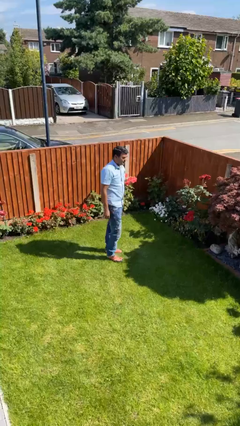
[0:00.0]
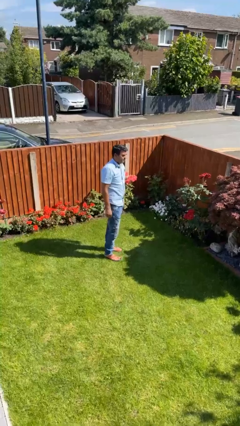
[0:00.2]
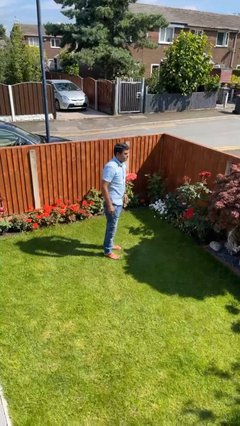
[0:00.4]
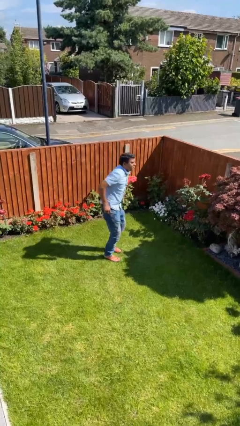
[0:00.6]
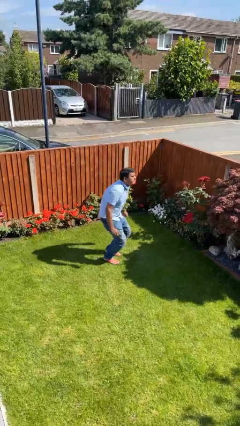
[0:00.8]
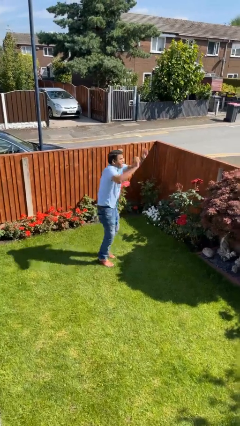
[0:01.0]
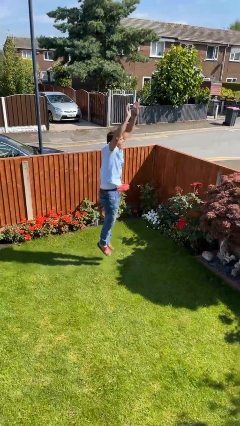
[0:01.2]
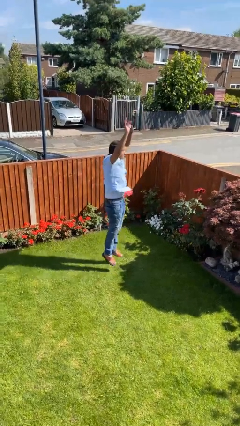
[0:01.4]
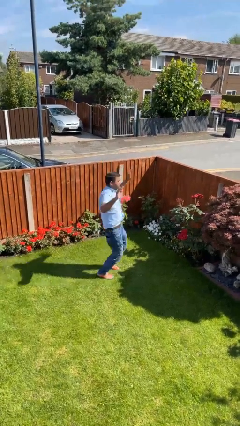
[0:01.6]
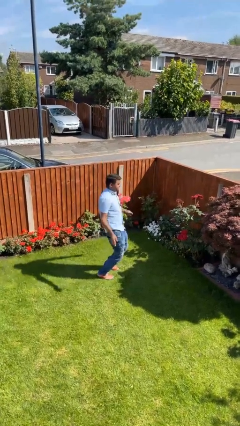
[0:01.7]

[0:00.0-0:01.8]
person jumps

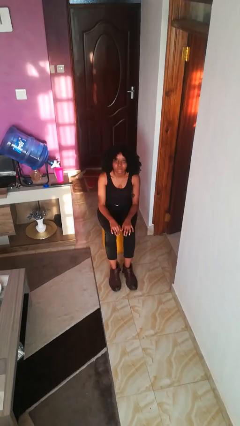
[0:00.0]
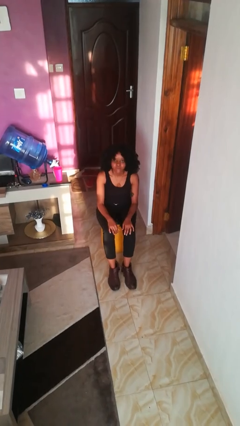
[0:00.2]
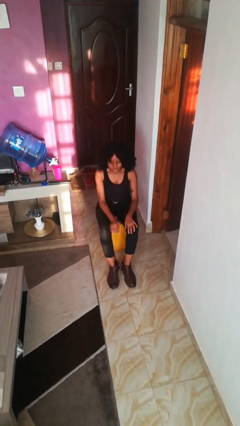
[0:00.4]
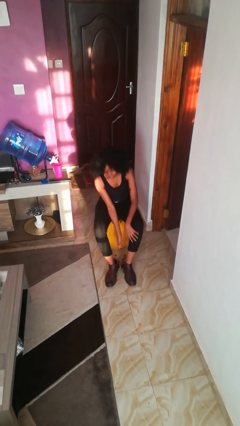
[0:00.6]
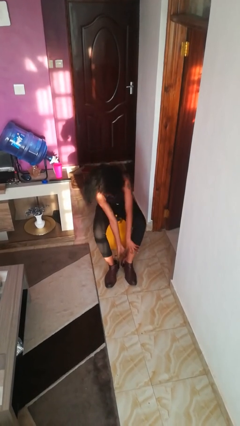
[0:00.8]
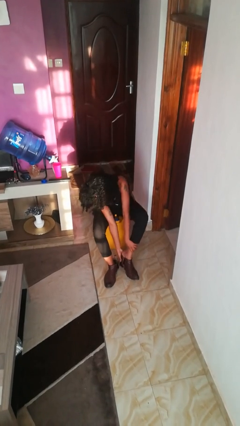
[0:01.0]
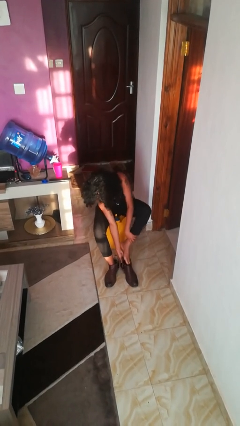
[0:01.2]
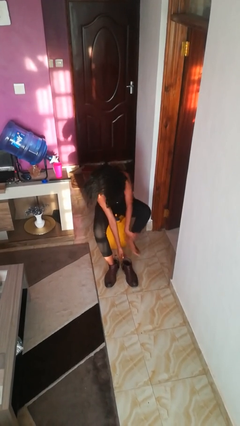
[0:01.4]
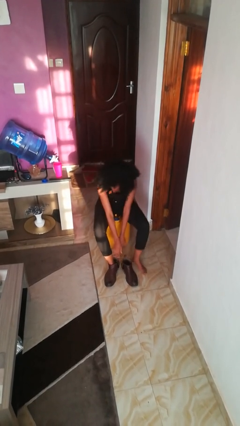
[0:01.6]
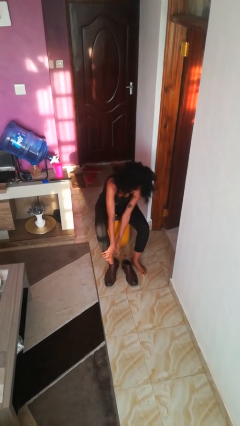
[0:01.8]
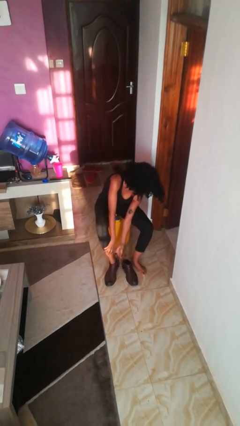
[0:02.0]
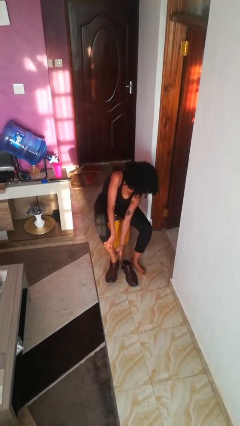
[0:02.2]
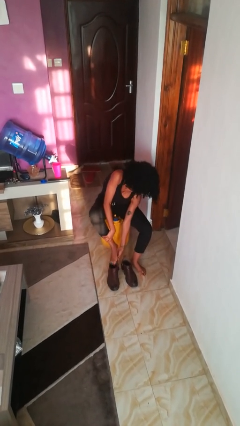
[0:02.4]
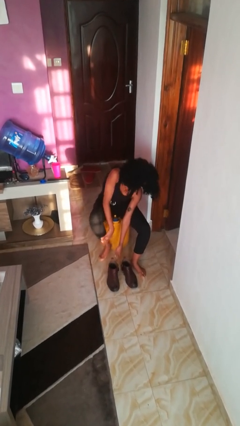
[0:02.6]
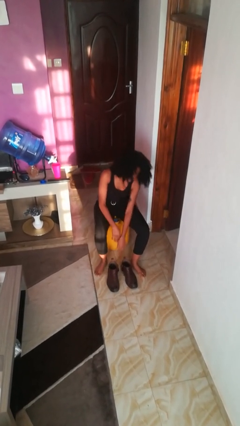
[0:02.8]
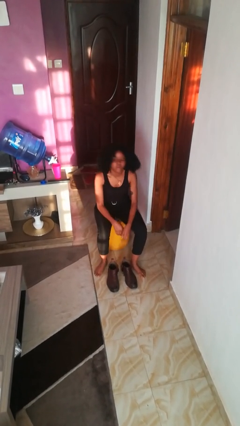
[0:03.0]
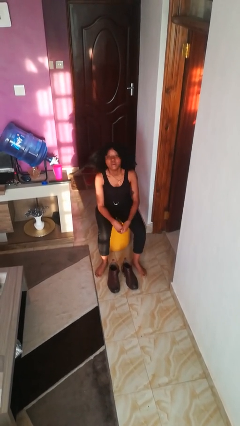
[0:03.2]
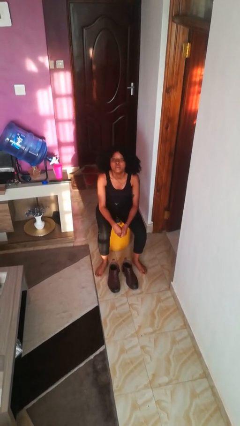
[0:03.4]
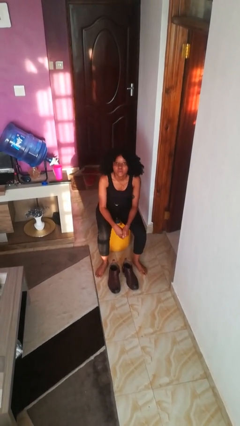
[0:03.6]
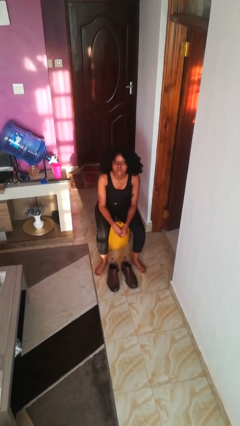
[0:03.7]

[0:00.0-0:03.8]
person takes off boots

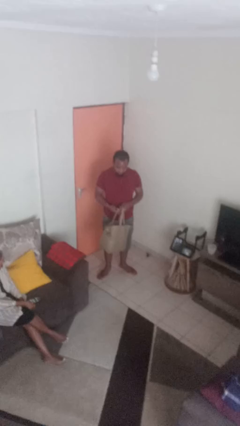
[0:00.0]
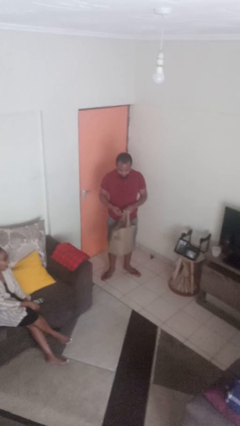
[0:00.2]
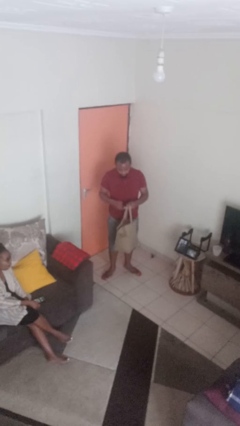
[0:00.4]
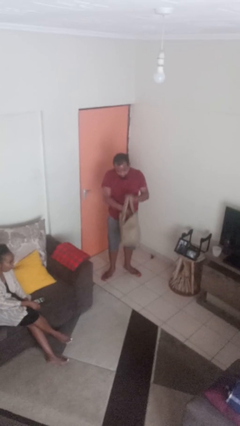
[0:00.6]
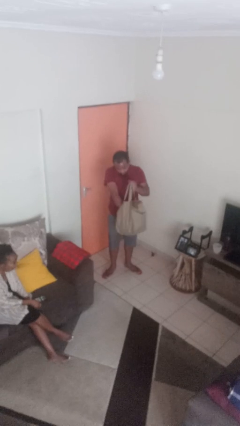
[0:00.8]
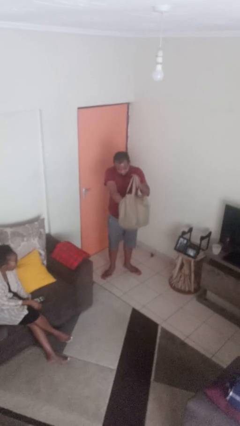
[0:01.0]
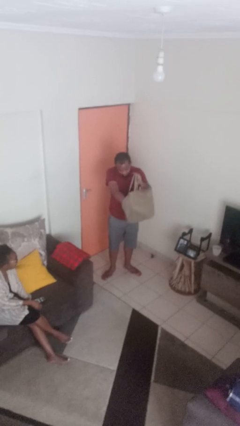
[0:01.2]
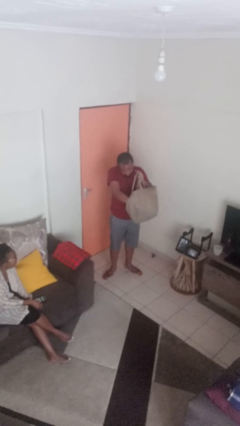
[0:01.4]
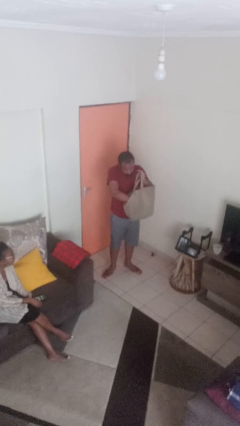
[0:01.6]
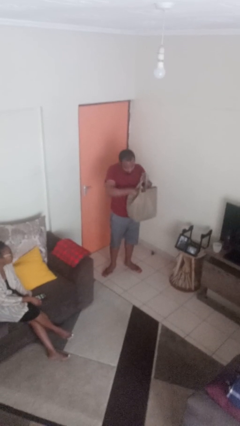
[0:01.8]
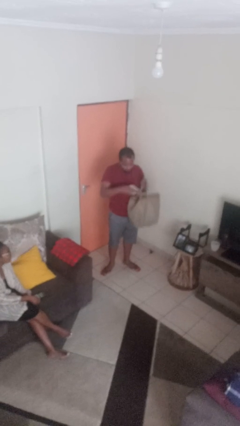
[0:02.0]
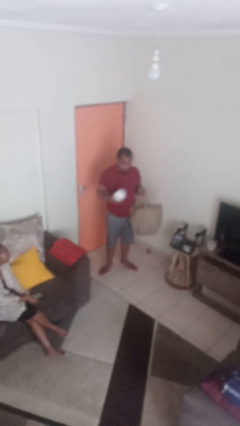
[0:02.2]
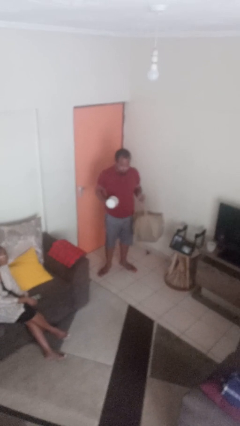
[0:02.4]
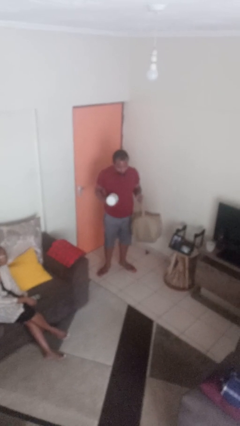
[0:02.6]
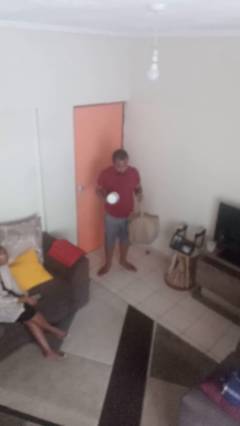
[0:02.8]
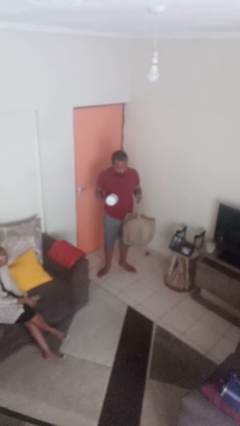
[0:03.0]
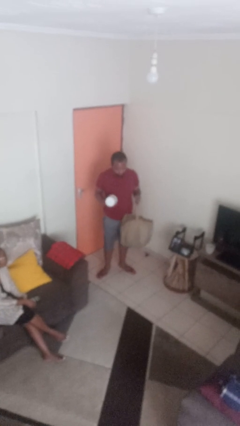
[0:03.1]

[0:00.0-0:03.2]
person takes object from bag

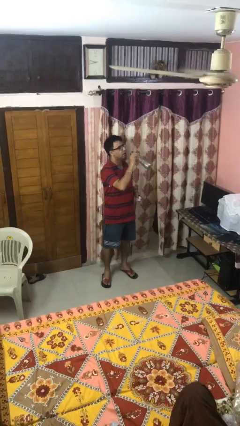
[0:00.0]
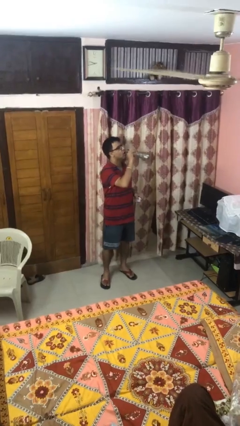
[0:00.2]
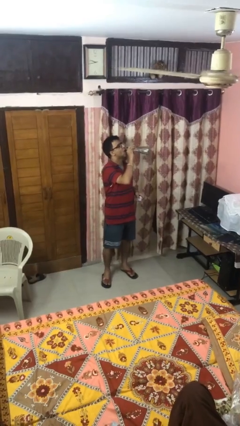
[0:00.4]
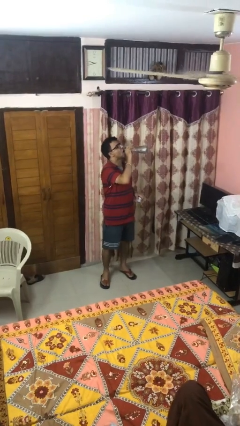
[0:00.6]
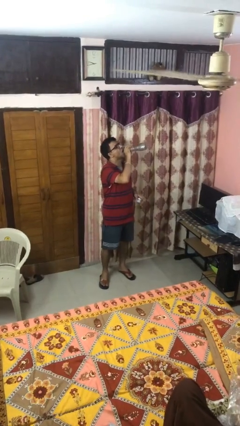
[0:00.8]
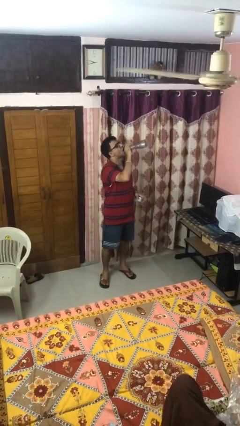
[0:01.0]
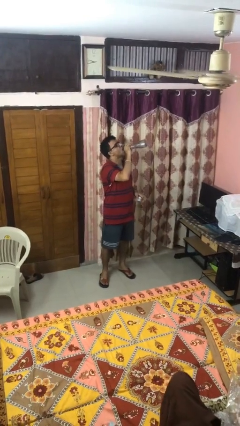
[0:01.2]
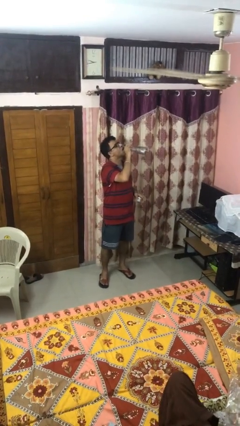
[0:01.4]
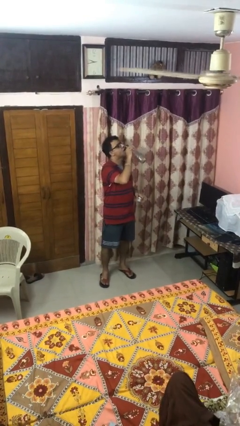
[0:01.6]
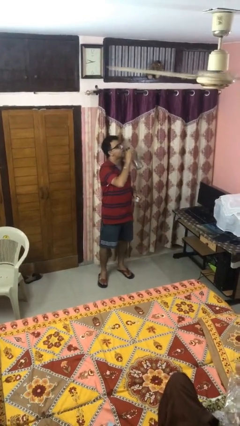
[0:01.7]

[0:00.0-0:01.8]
person drinks from bottle

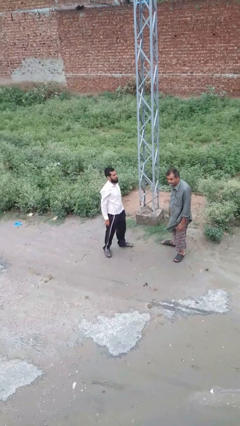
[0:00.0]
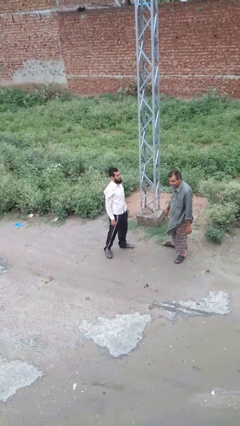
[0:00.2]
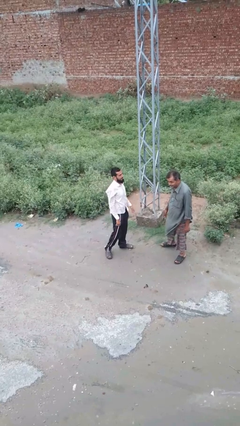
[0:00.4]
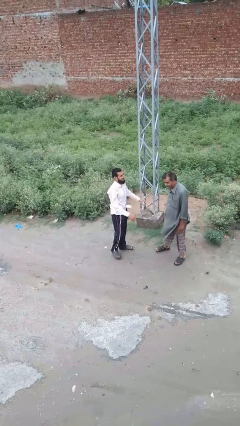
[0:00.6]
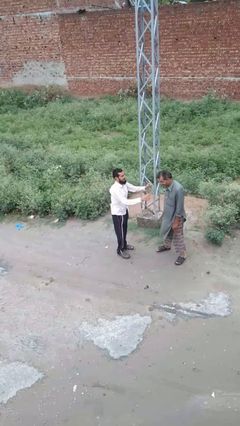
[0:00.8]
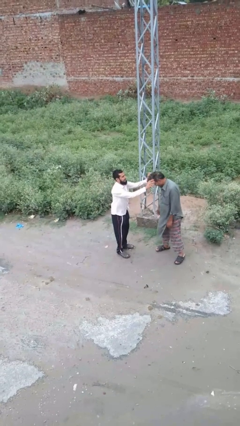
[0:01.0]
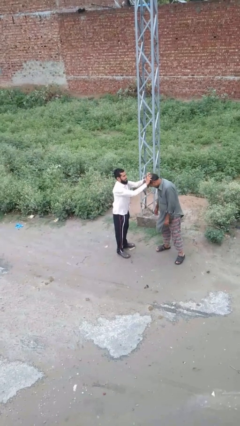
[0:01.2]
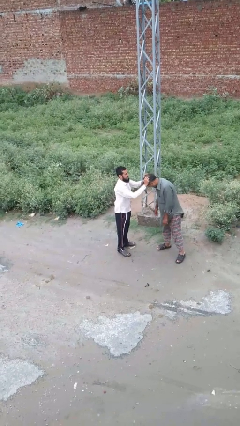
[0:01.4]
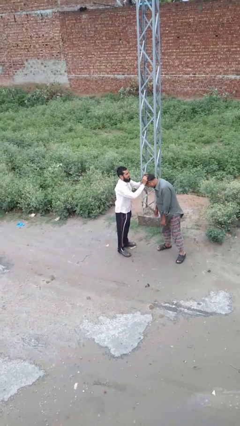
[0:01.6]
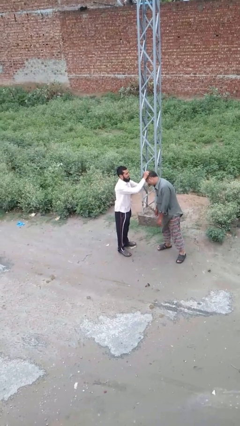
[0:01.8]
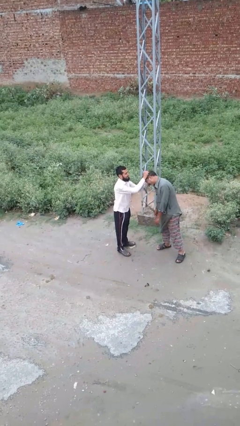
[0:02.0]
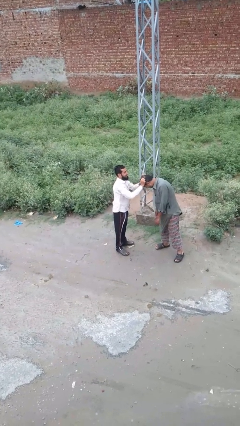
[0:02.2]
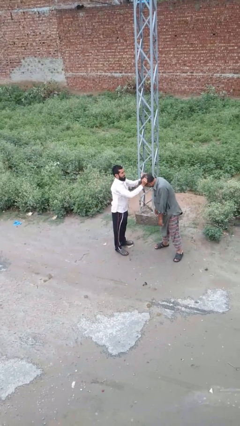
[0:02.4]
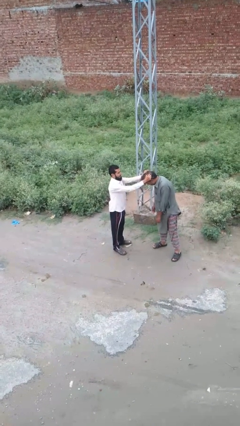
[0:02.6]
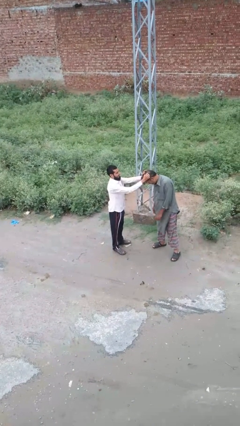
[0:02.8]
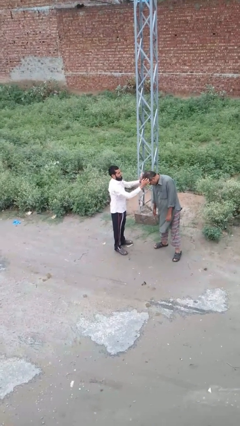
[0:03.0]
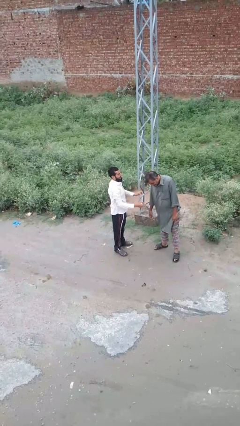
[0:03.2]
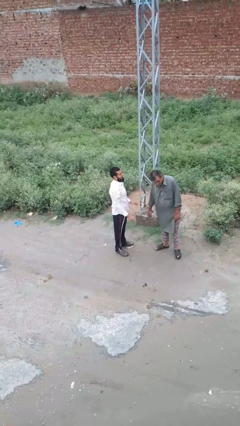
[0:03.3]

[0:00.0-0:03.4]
person grabs person by hair

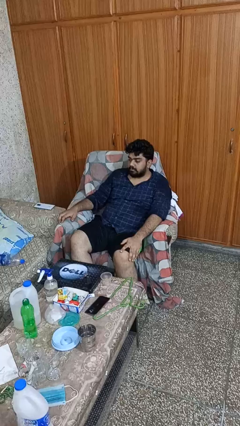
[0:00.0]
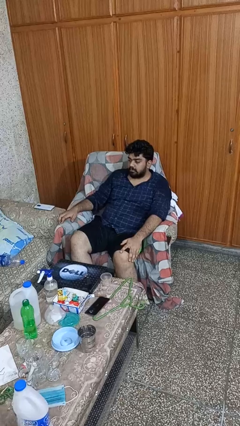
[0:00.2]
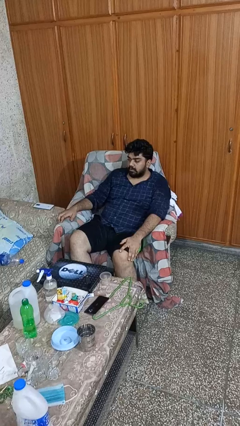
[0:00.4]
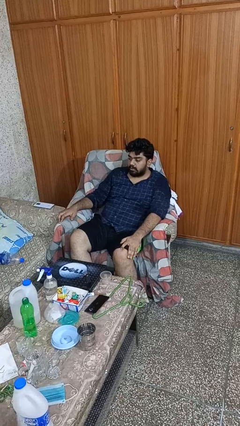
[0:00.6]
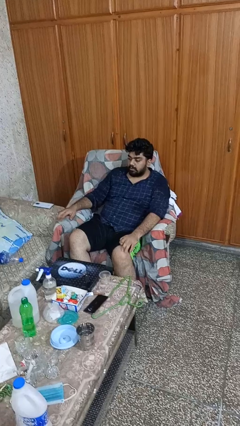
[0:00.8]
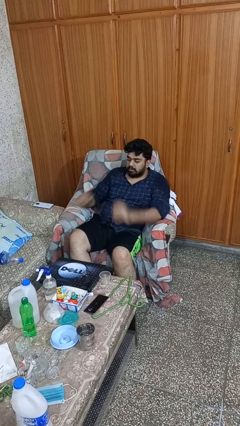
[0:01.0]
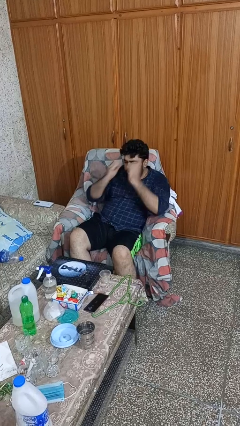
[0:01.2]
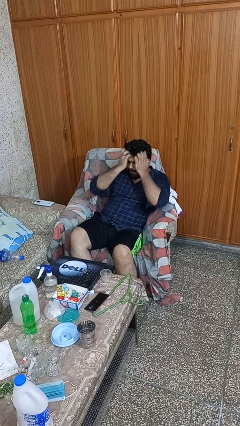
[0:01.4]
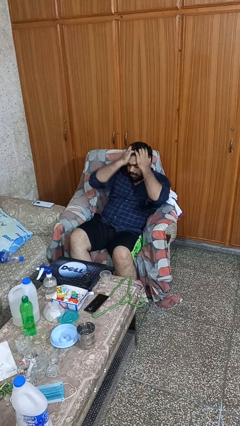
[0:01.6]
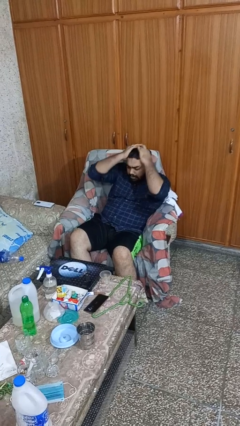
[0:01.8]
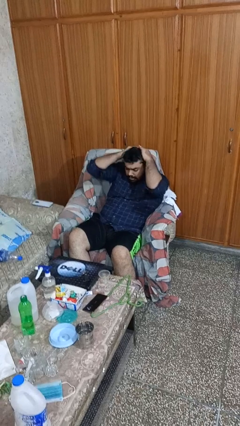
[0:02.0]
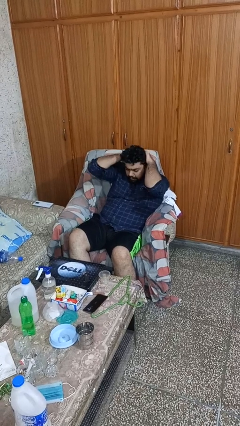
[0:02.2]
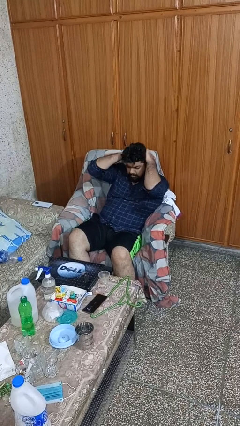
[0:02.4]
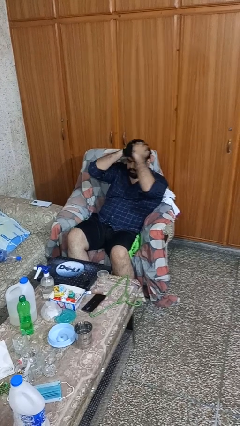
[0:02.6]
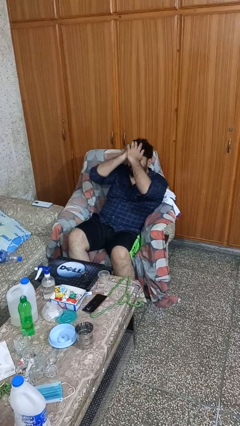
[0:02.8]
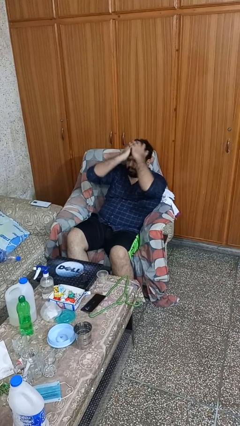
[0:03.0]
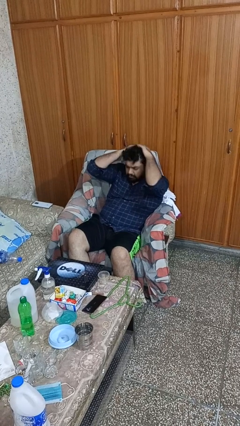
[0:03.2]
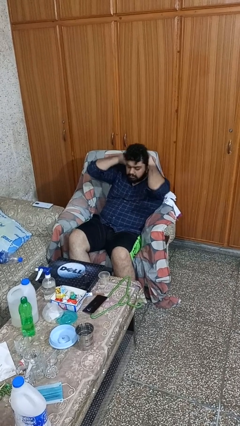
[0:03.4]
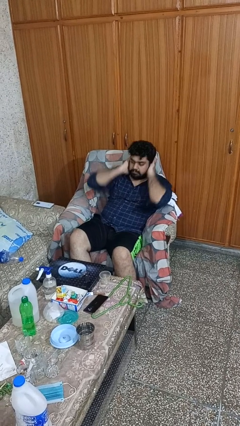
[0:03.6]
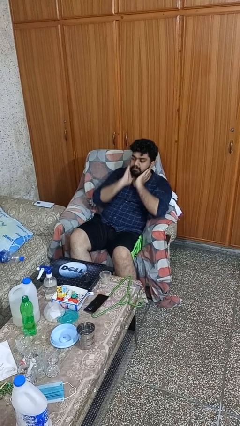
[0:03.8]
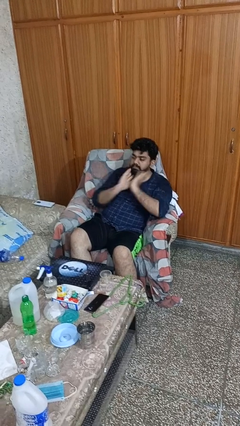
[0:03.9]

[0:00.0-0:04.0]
person scratches face
